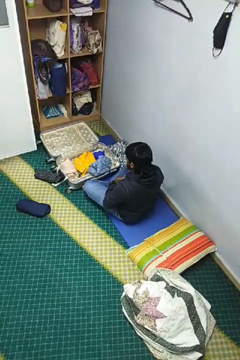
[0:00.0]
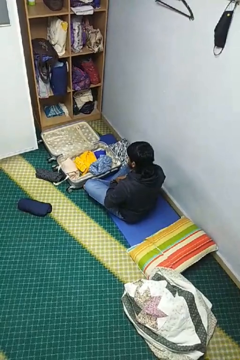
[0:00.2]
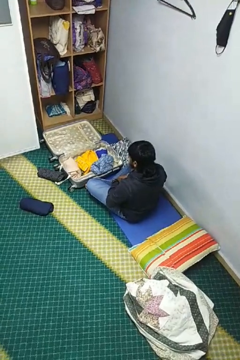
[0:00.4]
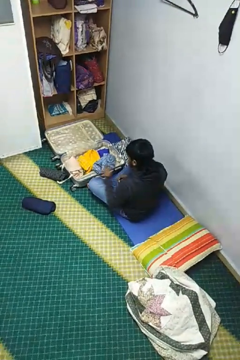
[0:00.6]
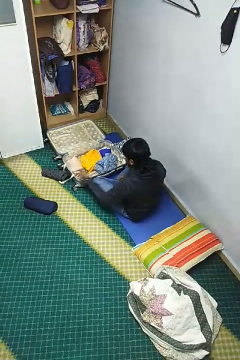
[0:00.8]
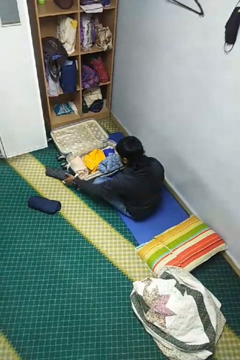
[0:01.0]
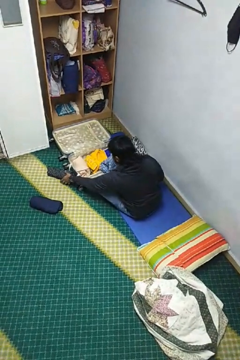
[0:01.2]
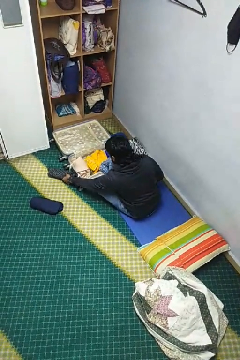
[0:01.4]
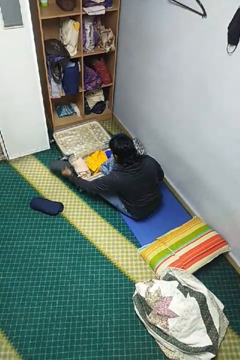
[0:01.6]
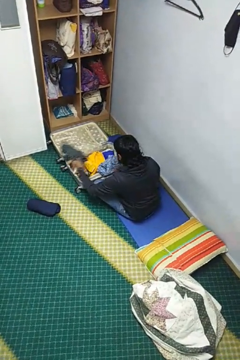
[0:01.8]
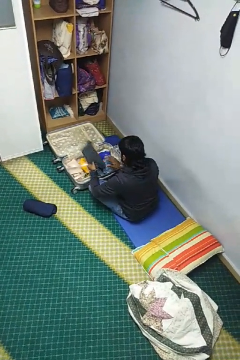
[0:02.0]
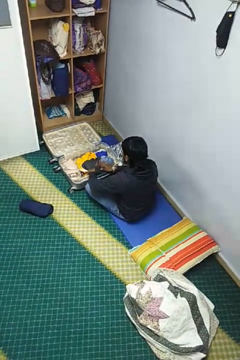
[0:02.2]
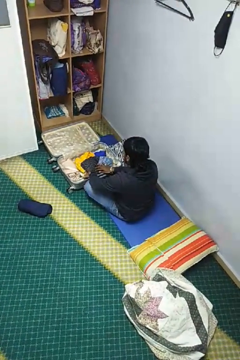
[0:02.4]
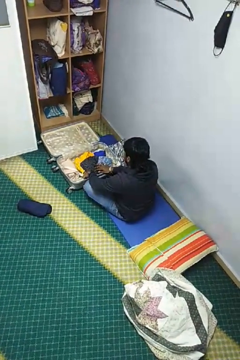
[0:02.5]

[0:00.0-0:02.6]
person loads clothes into suitcase

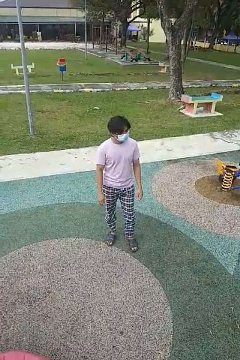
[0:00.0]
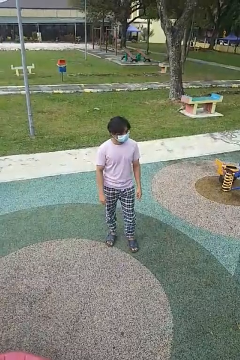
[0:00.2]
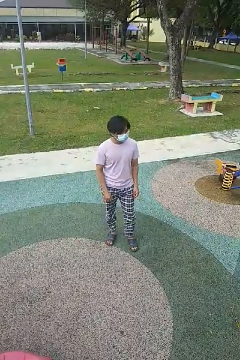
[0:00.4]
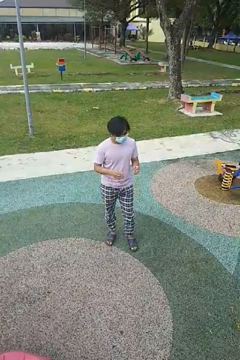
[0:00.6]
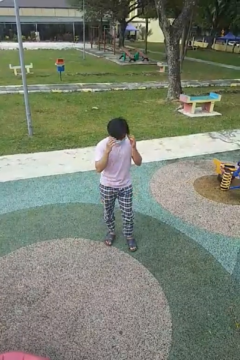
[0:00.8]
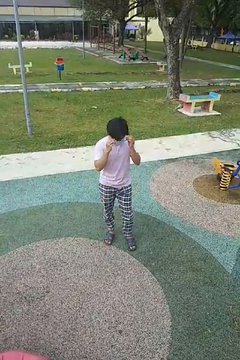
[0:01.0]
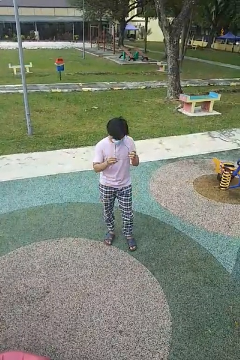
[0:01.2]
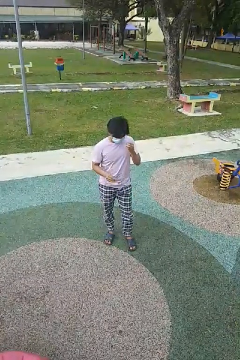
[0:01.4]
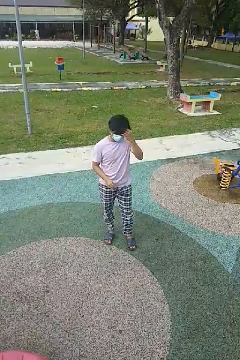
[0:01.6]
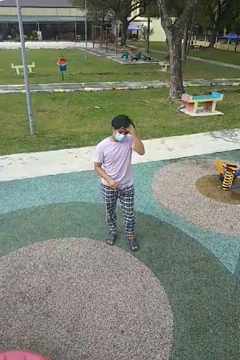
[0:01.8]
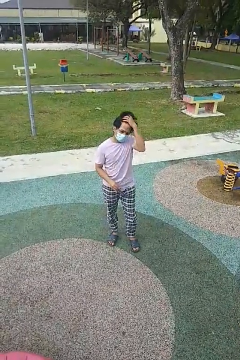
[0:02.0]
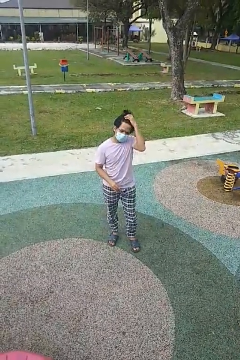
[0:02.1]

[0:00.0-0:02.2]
person takes off glasses

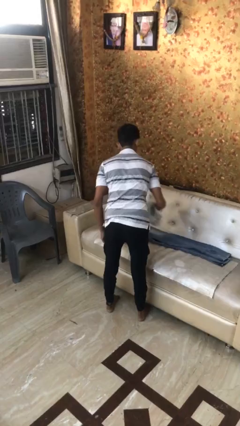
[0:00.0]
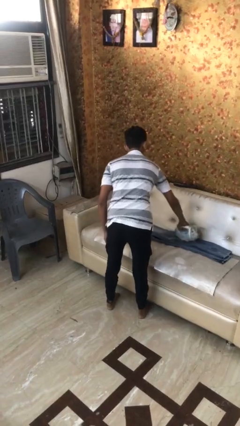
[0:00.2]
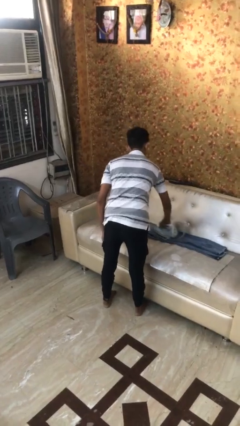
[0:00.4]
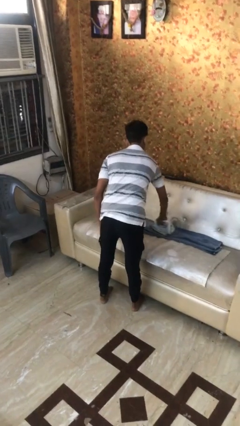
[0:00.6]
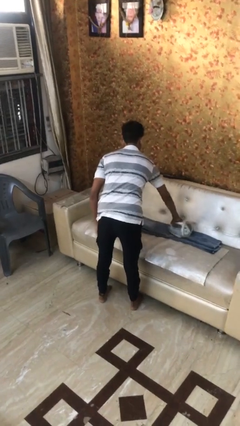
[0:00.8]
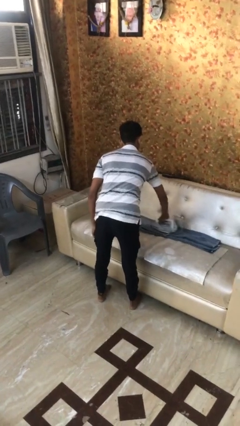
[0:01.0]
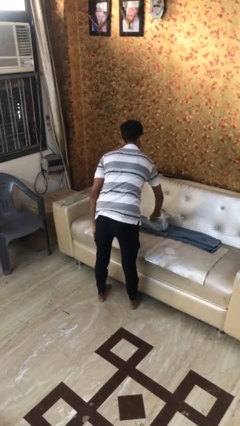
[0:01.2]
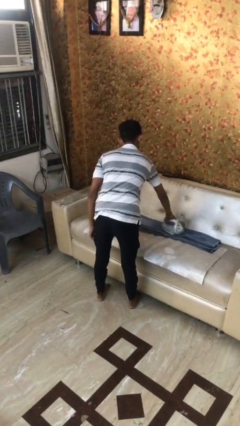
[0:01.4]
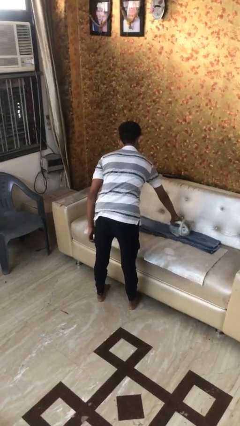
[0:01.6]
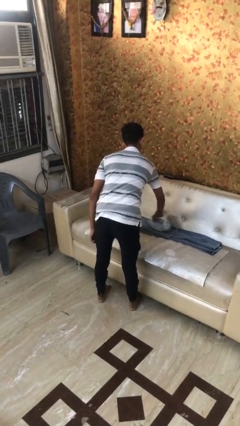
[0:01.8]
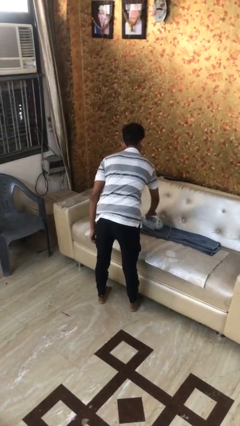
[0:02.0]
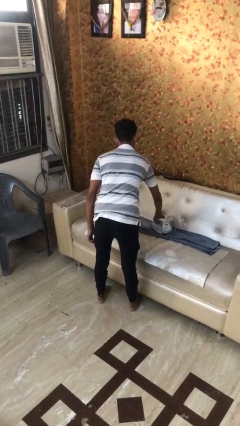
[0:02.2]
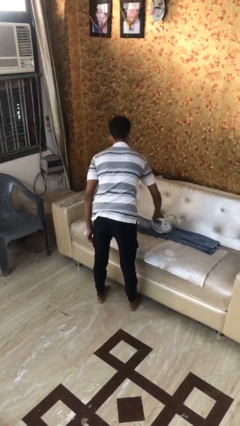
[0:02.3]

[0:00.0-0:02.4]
person irons clothes

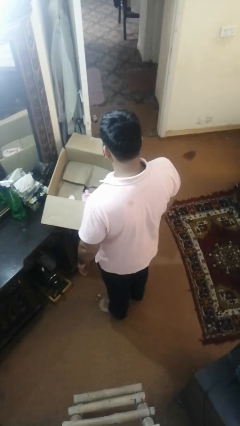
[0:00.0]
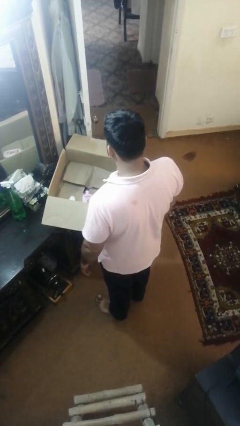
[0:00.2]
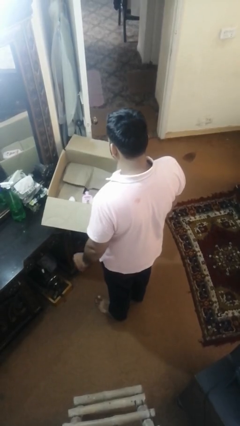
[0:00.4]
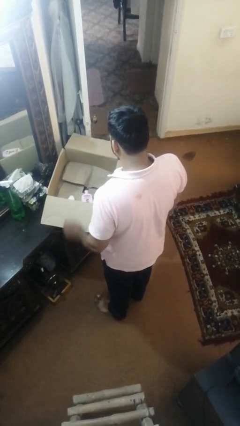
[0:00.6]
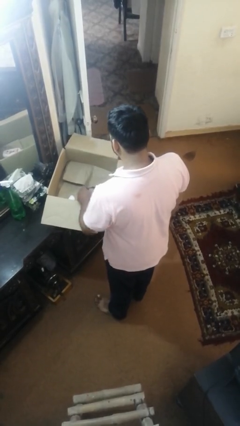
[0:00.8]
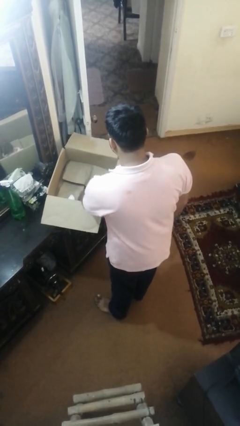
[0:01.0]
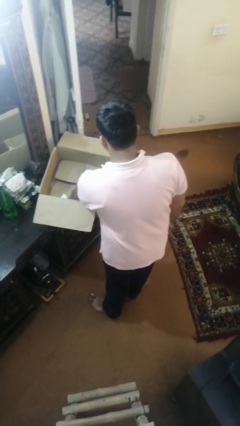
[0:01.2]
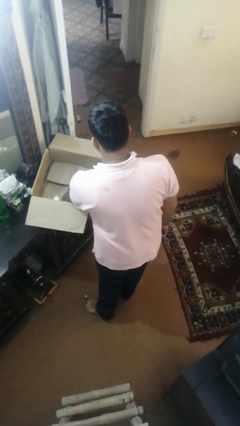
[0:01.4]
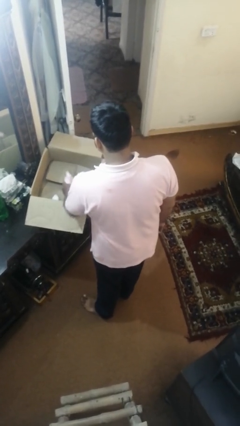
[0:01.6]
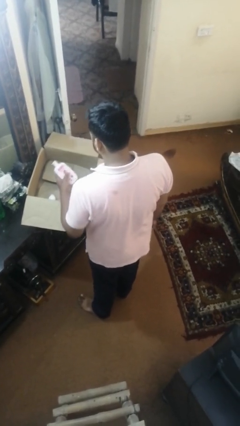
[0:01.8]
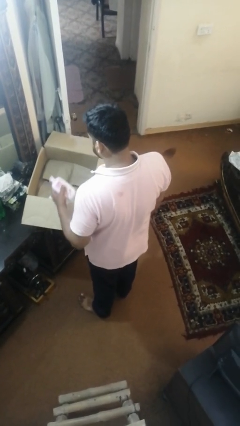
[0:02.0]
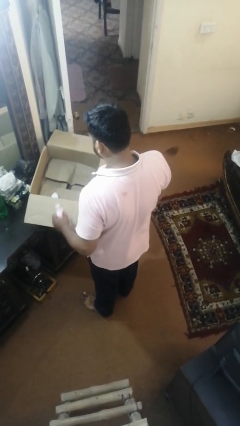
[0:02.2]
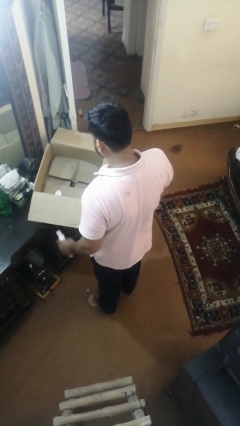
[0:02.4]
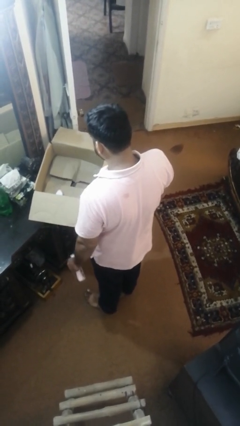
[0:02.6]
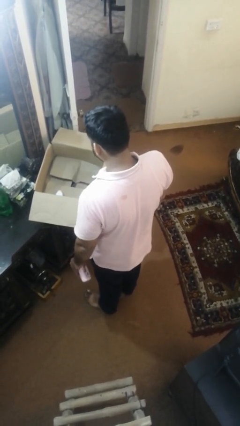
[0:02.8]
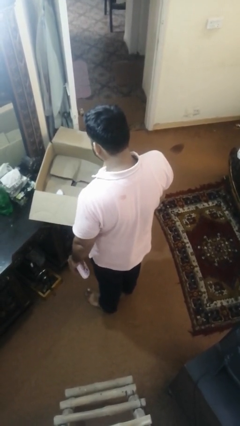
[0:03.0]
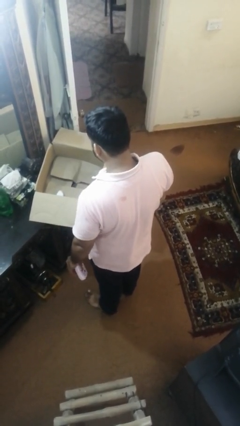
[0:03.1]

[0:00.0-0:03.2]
person takes object from box

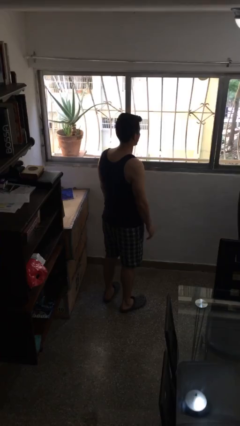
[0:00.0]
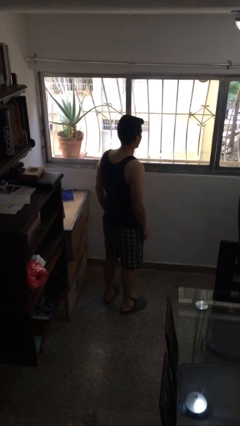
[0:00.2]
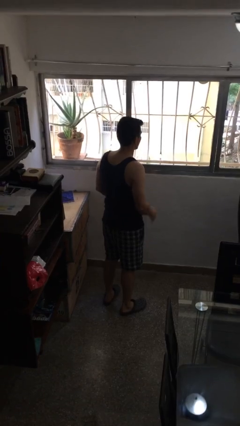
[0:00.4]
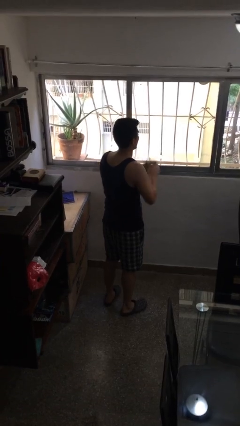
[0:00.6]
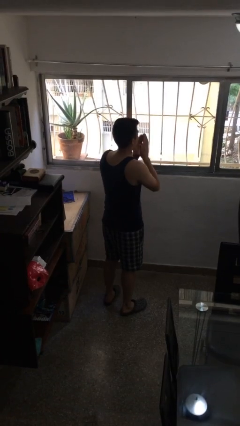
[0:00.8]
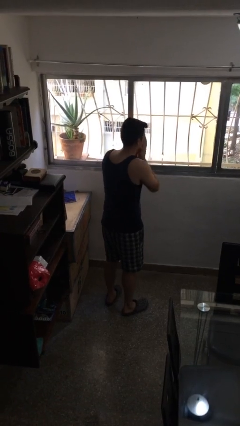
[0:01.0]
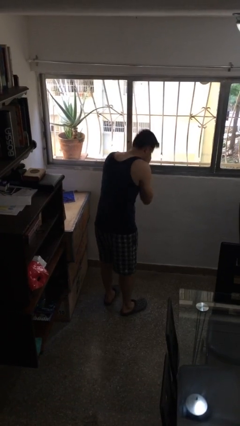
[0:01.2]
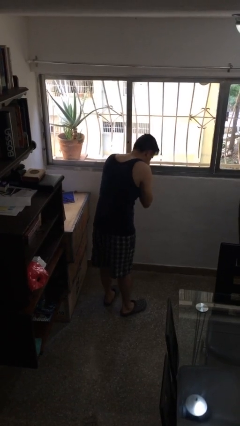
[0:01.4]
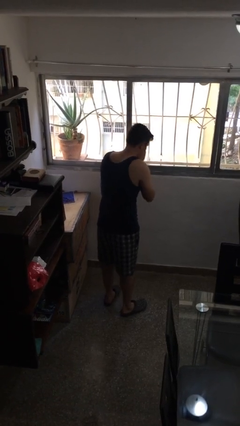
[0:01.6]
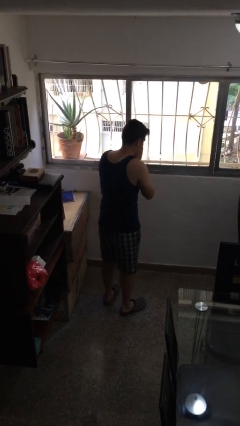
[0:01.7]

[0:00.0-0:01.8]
person sneezes into hand

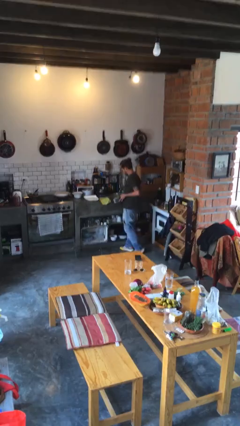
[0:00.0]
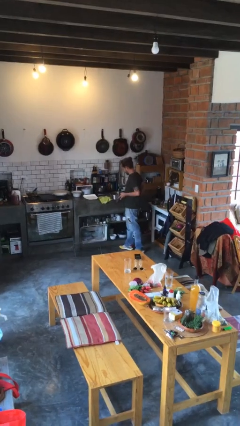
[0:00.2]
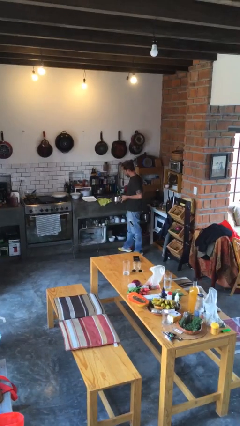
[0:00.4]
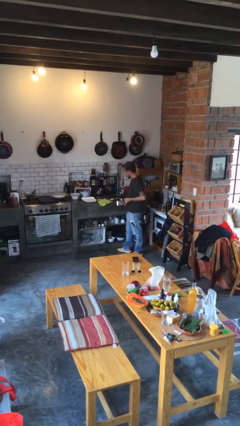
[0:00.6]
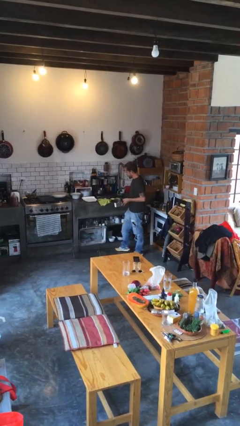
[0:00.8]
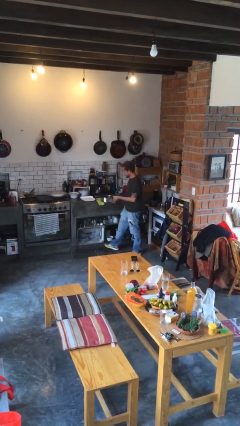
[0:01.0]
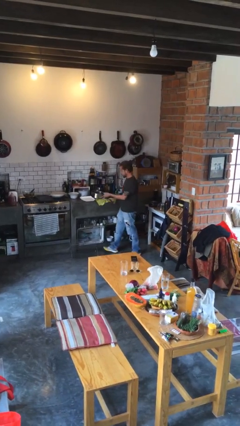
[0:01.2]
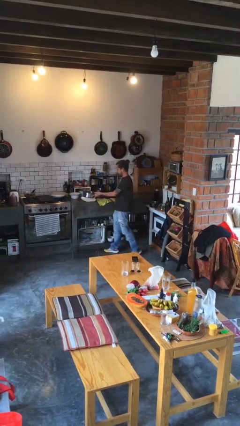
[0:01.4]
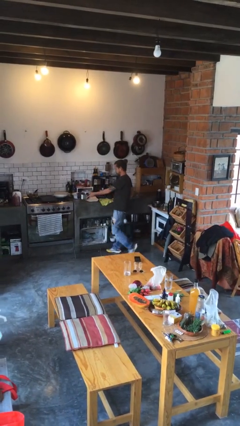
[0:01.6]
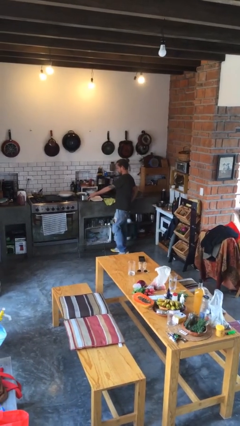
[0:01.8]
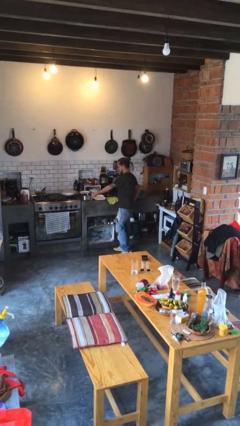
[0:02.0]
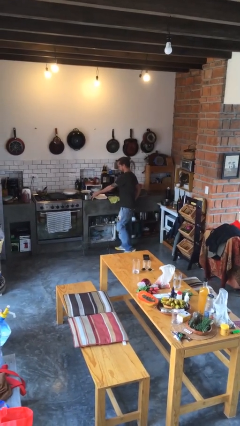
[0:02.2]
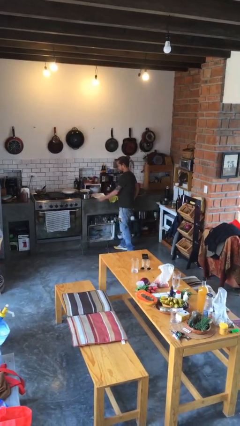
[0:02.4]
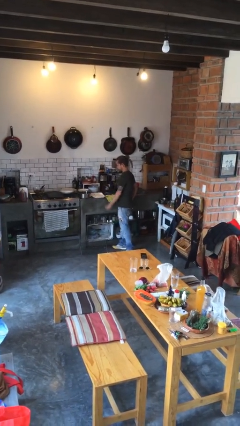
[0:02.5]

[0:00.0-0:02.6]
person puts down object on countertop

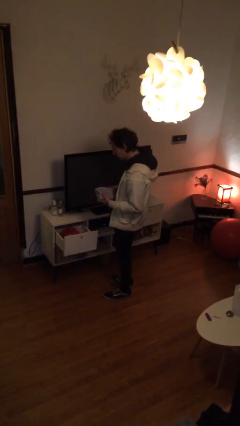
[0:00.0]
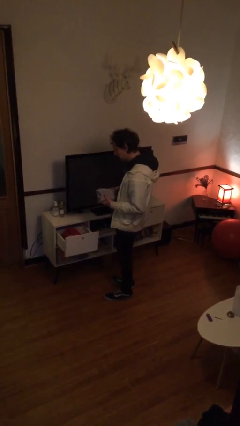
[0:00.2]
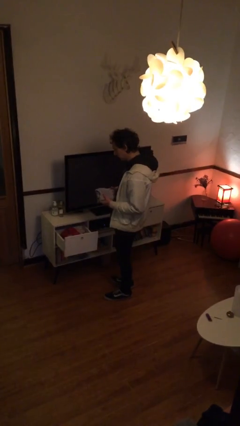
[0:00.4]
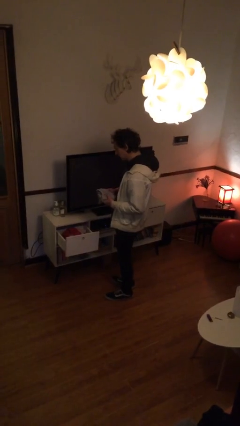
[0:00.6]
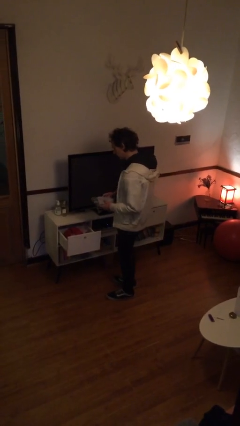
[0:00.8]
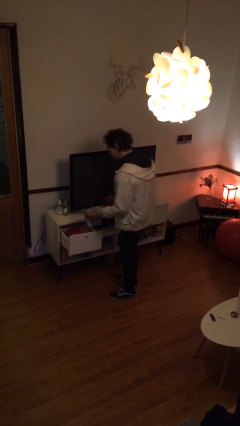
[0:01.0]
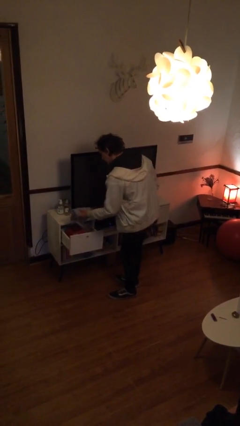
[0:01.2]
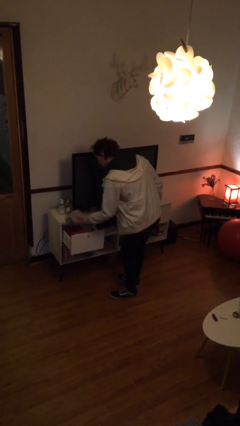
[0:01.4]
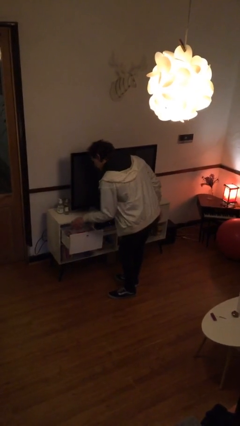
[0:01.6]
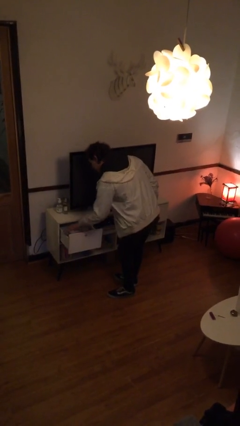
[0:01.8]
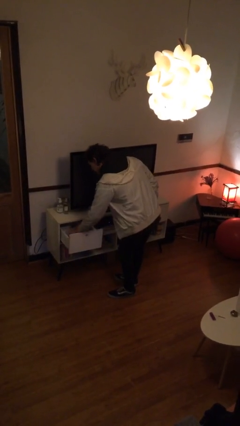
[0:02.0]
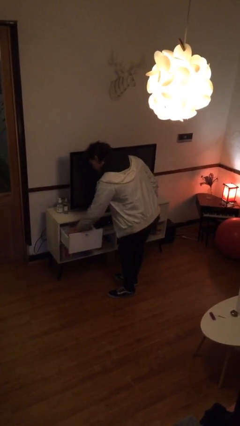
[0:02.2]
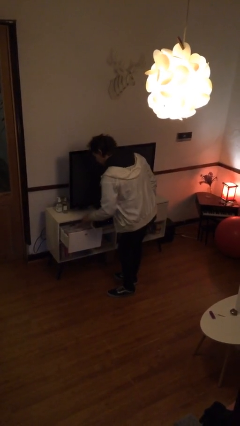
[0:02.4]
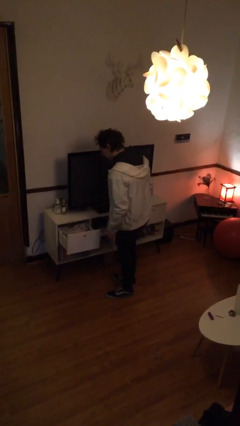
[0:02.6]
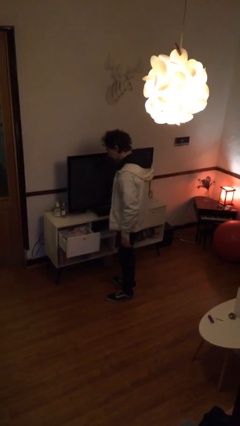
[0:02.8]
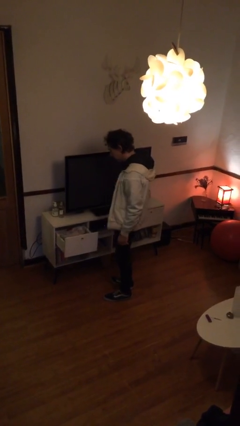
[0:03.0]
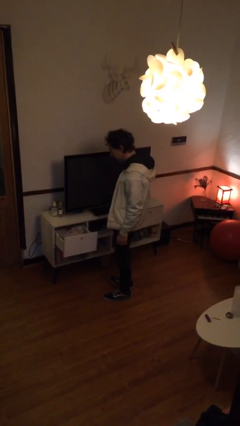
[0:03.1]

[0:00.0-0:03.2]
person puts clothes into dresser

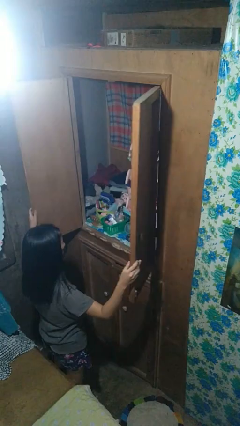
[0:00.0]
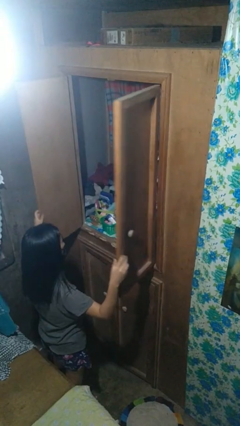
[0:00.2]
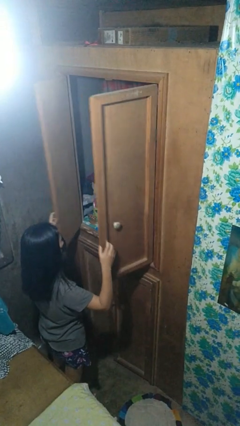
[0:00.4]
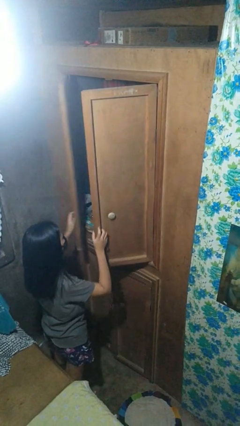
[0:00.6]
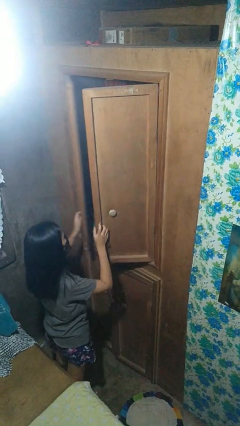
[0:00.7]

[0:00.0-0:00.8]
person closes closet door
